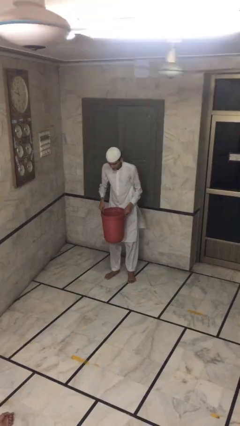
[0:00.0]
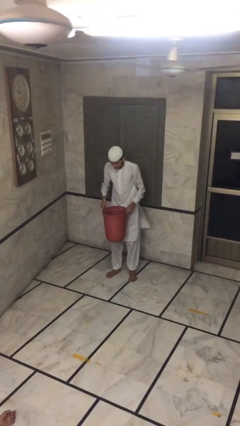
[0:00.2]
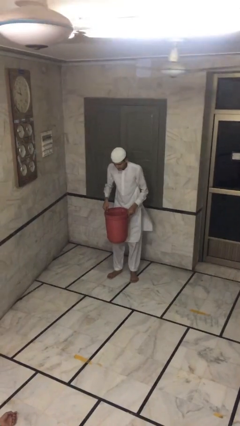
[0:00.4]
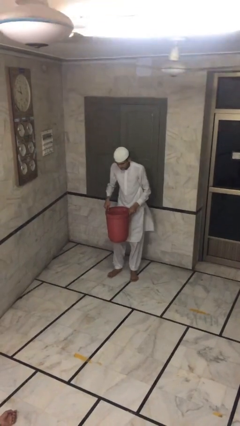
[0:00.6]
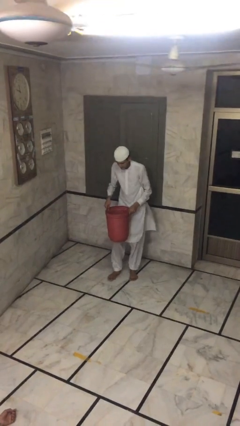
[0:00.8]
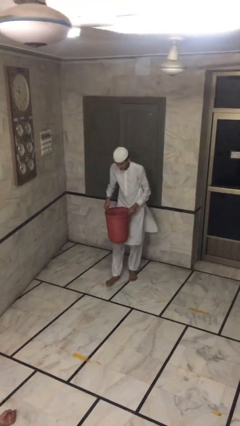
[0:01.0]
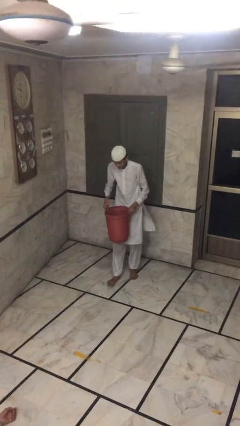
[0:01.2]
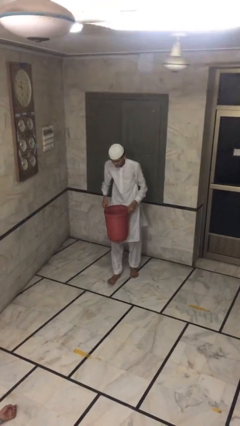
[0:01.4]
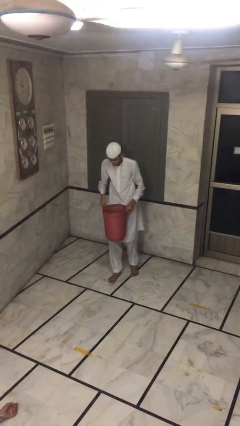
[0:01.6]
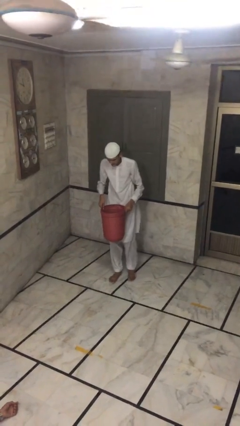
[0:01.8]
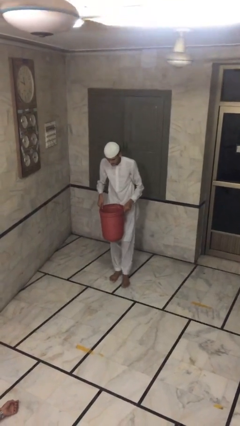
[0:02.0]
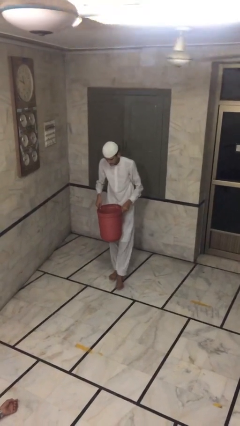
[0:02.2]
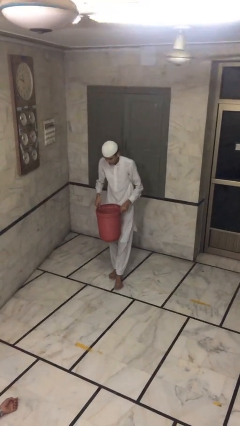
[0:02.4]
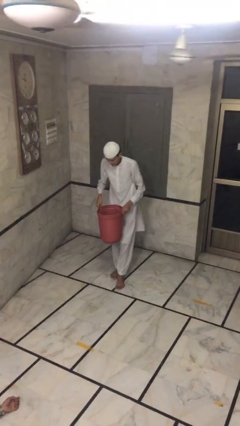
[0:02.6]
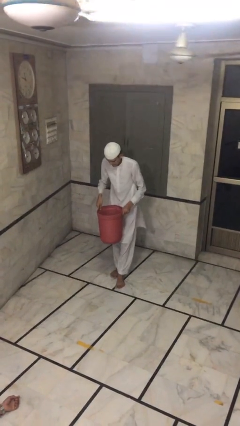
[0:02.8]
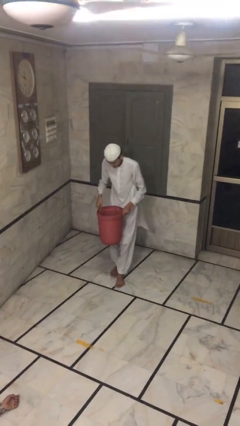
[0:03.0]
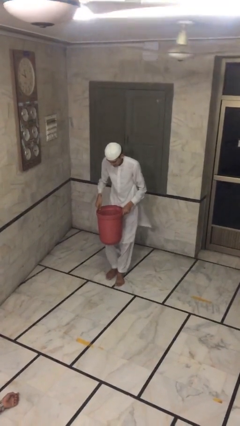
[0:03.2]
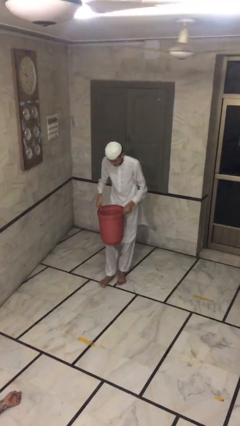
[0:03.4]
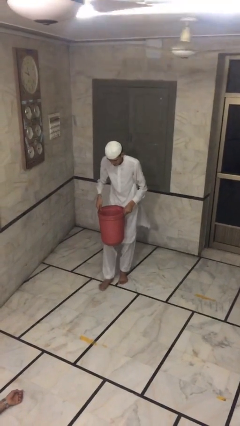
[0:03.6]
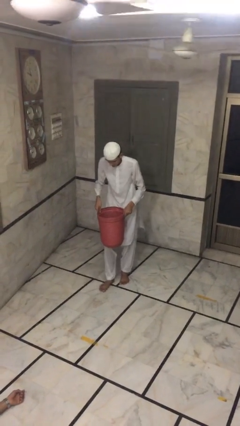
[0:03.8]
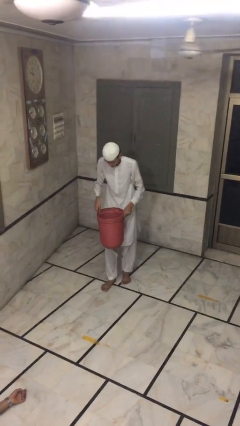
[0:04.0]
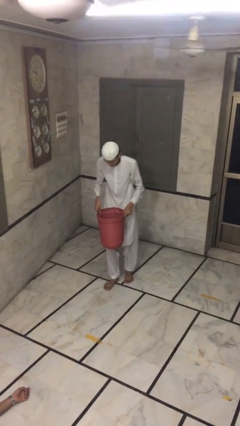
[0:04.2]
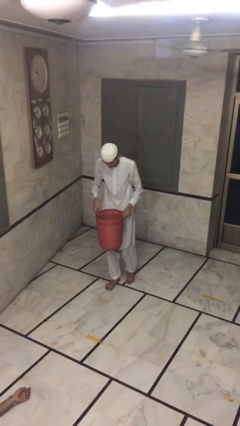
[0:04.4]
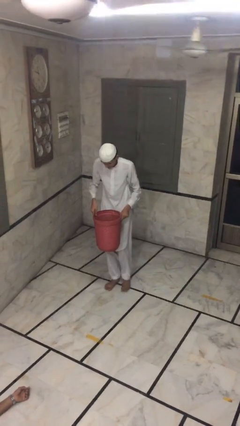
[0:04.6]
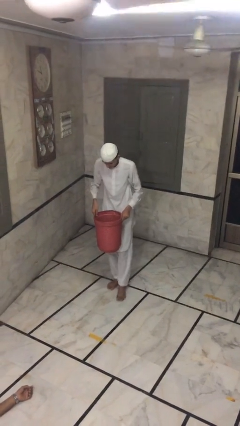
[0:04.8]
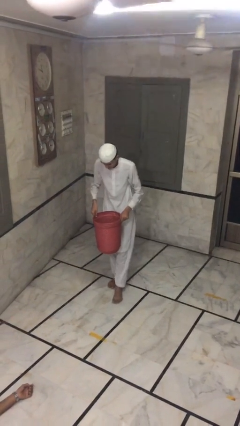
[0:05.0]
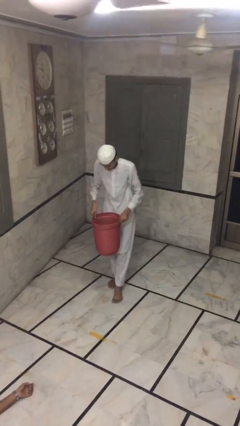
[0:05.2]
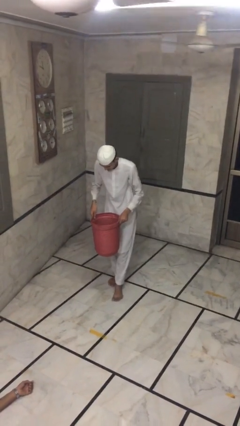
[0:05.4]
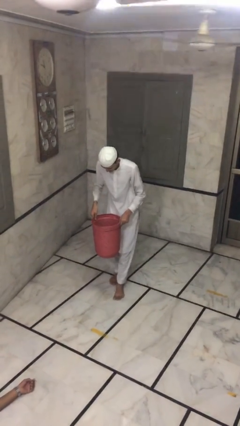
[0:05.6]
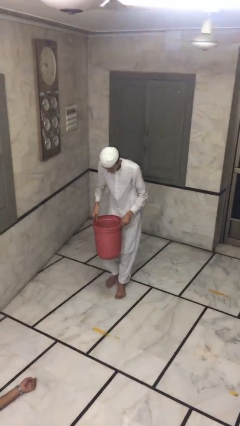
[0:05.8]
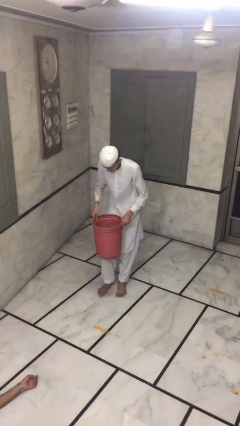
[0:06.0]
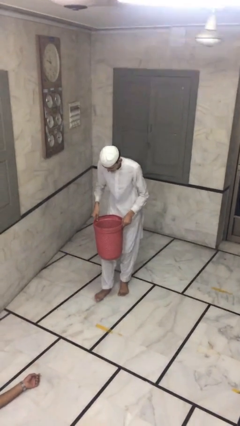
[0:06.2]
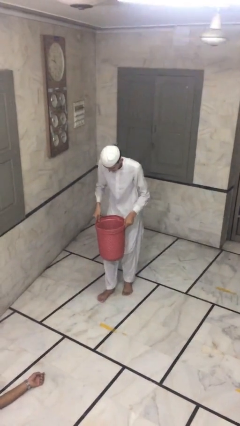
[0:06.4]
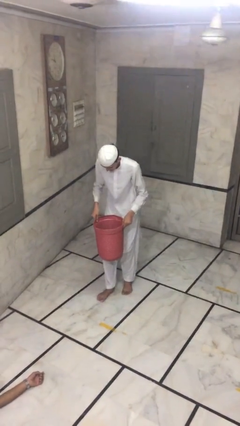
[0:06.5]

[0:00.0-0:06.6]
person carries heavy object

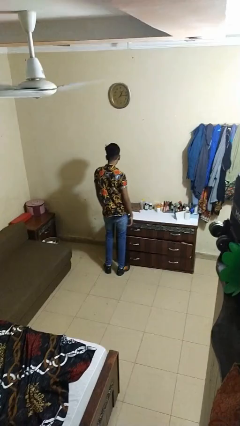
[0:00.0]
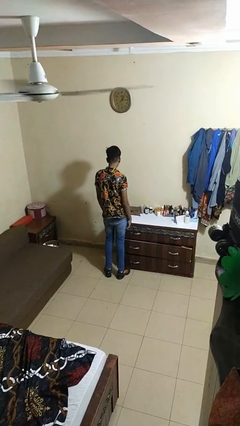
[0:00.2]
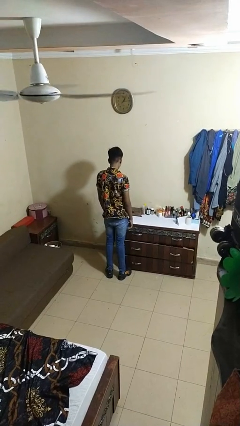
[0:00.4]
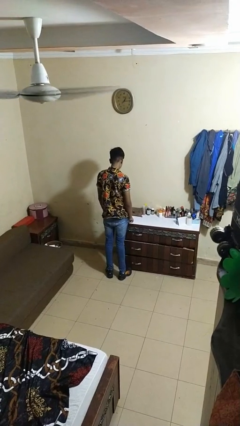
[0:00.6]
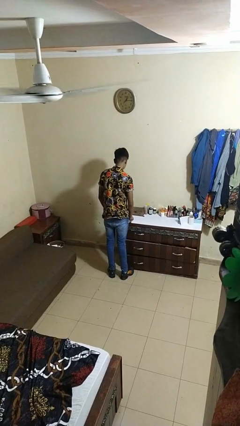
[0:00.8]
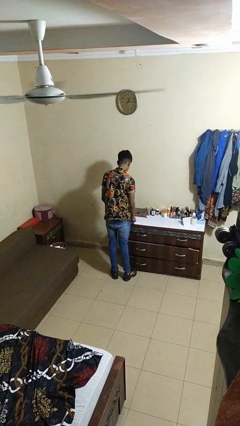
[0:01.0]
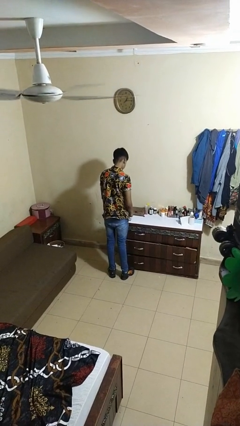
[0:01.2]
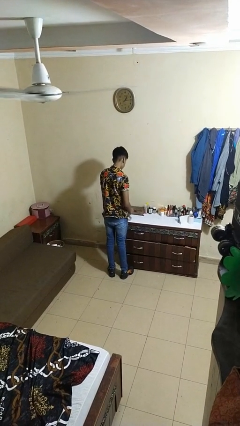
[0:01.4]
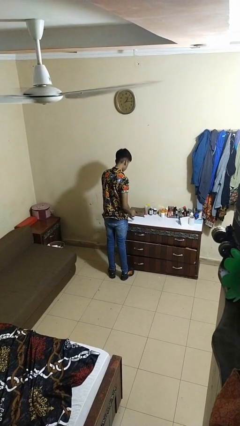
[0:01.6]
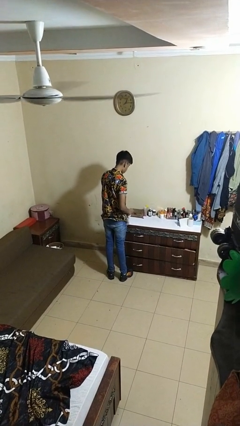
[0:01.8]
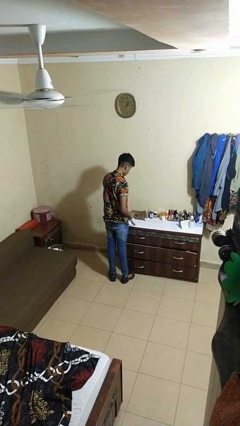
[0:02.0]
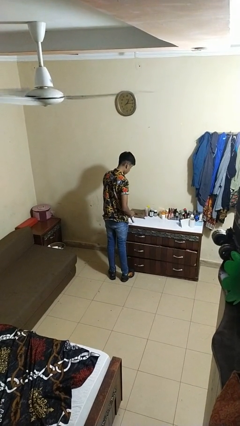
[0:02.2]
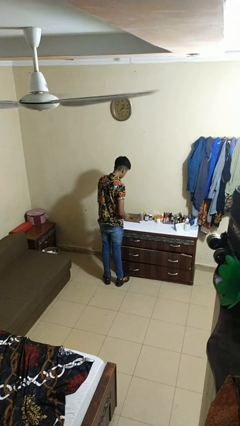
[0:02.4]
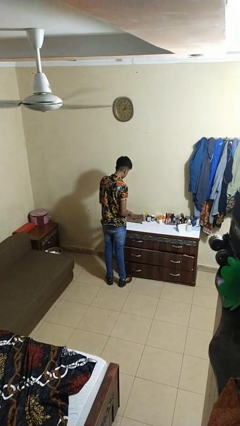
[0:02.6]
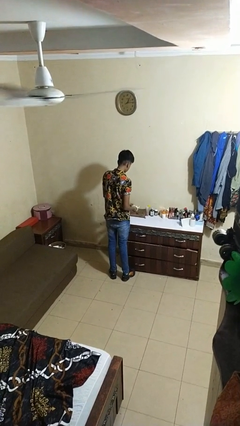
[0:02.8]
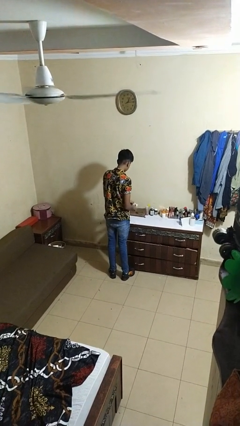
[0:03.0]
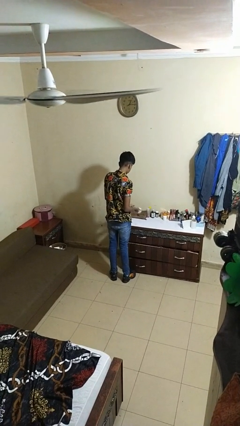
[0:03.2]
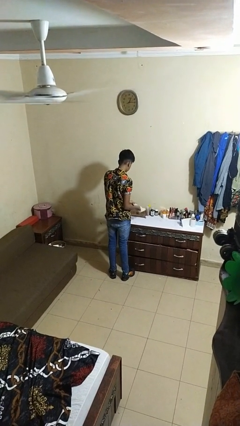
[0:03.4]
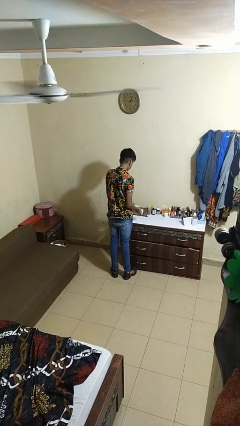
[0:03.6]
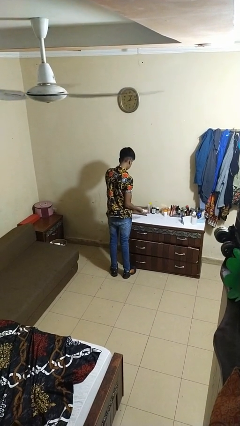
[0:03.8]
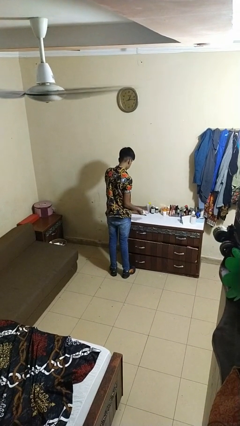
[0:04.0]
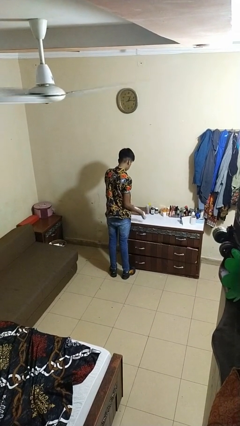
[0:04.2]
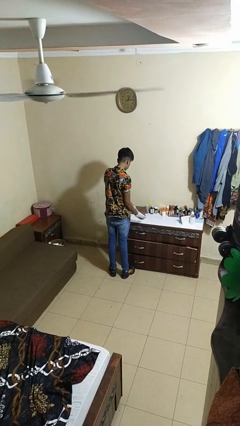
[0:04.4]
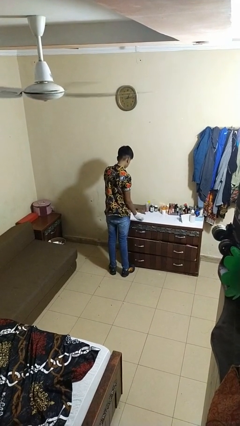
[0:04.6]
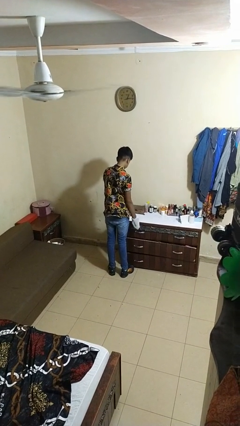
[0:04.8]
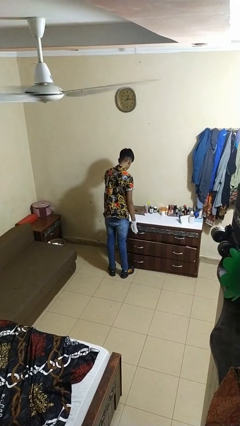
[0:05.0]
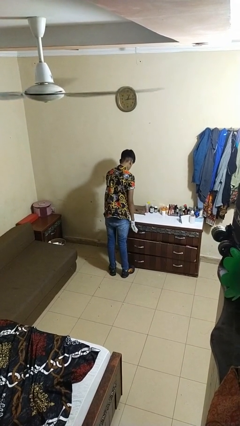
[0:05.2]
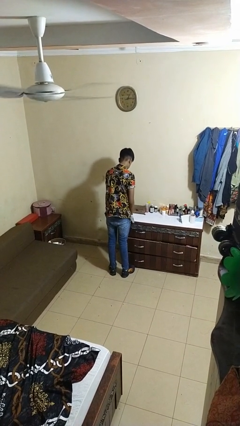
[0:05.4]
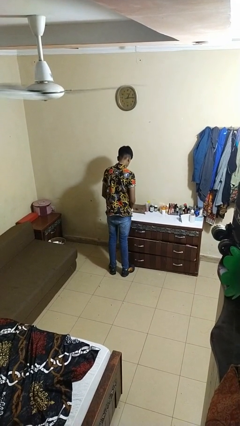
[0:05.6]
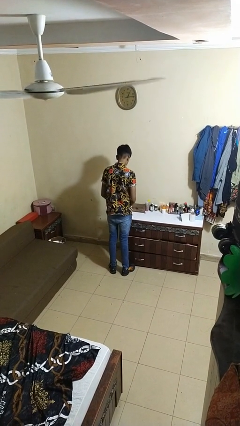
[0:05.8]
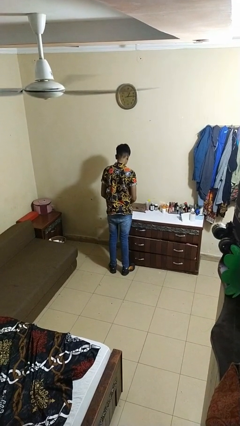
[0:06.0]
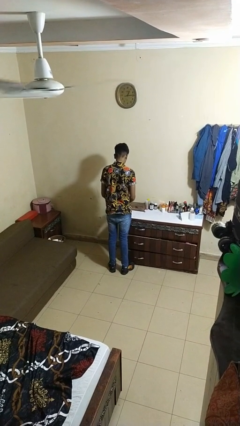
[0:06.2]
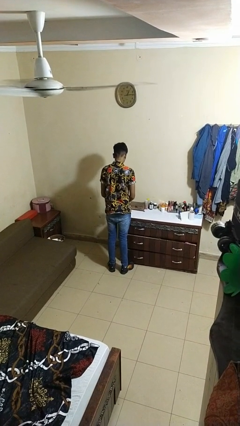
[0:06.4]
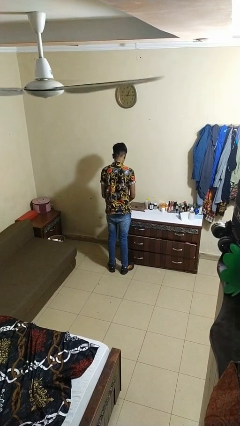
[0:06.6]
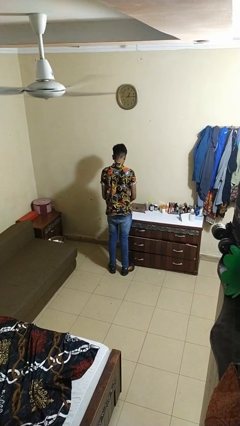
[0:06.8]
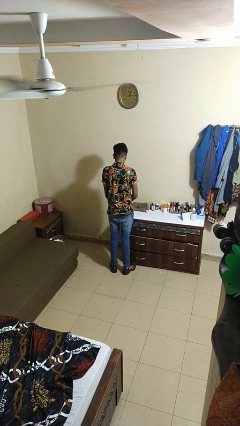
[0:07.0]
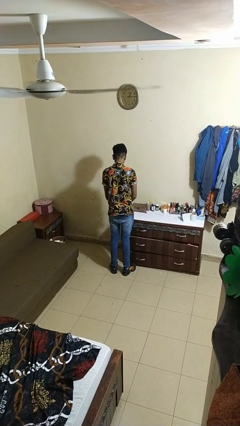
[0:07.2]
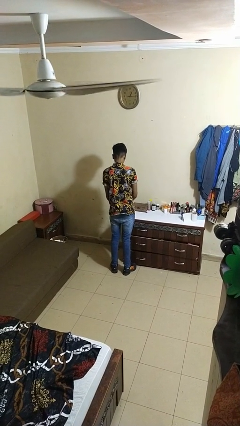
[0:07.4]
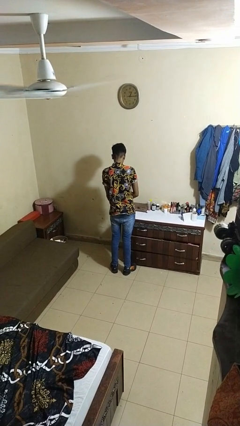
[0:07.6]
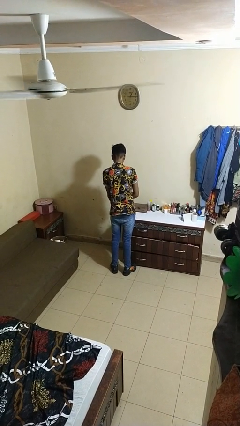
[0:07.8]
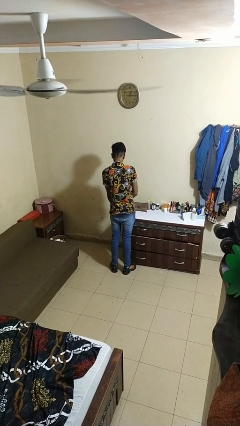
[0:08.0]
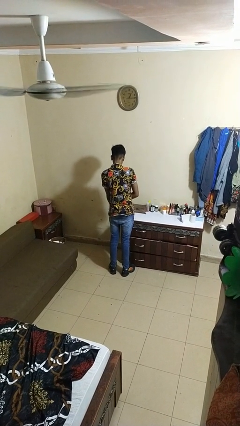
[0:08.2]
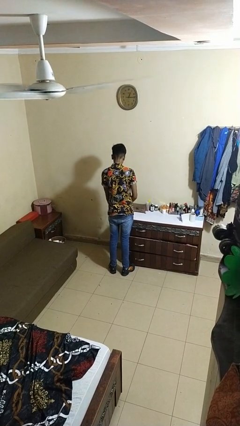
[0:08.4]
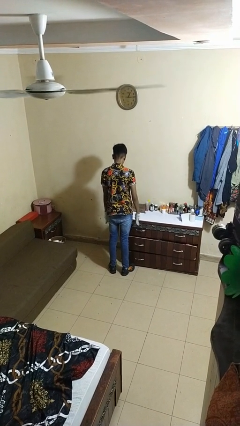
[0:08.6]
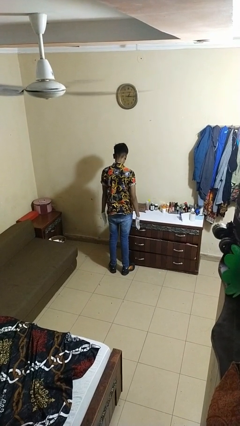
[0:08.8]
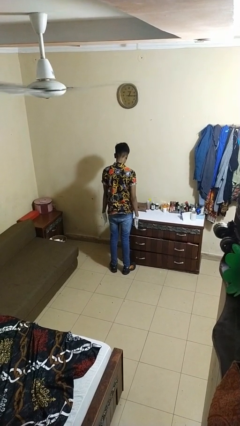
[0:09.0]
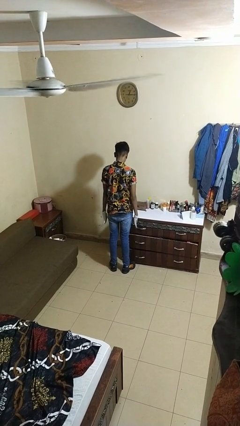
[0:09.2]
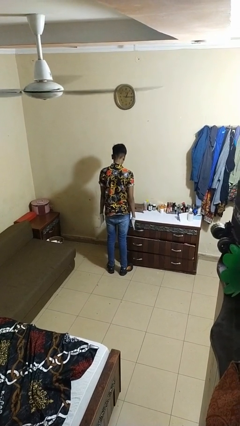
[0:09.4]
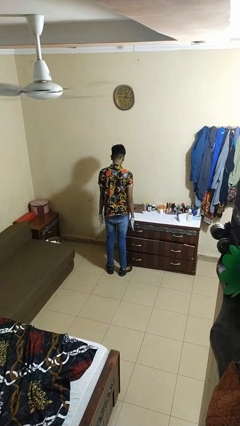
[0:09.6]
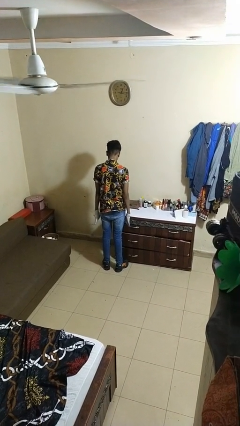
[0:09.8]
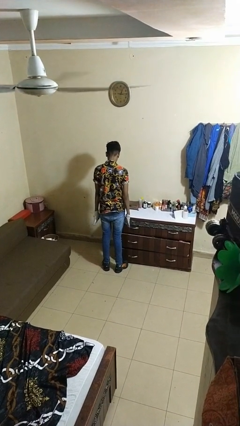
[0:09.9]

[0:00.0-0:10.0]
person puts on gloves

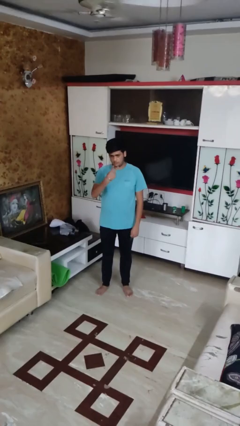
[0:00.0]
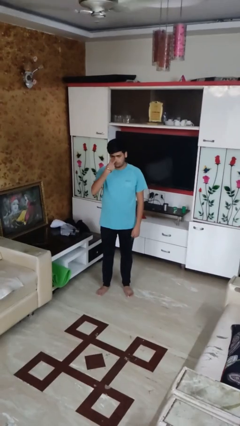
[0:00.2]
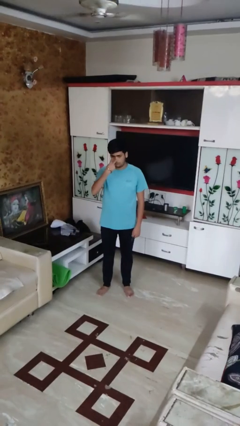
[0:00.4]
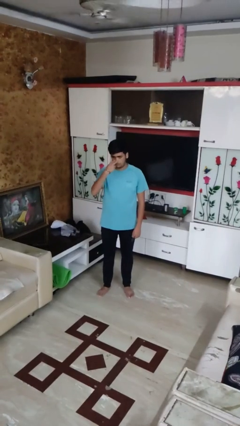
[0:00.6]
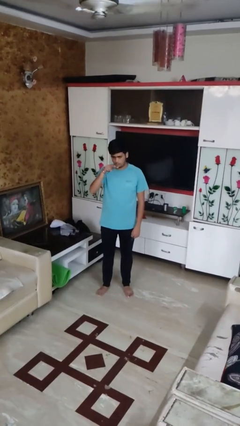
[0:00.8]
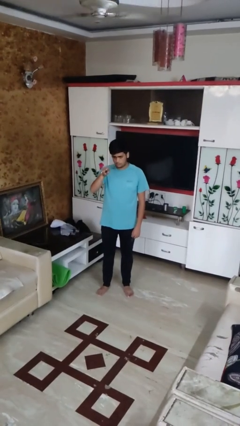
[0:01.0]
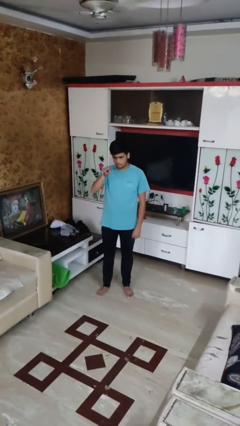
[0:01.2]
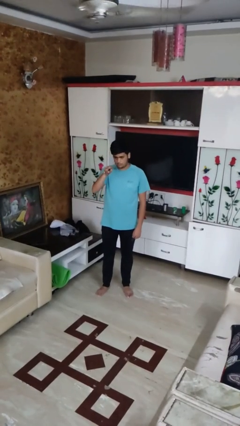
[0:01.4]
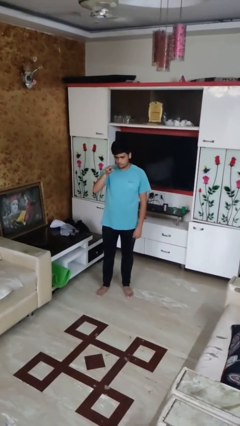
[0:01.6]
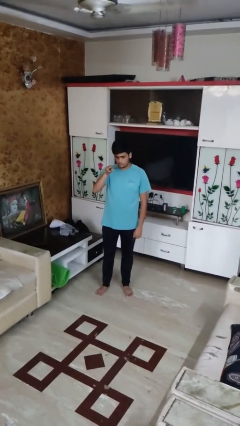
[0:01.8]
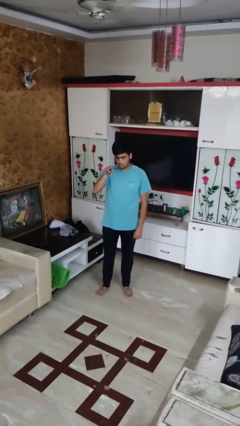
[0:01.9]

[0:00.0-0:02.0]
person gestures watch closely
